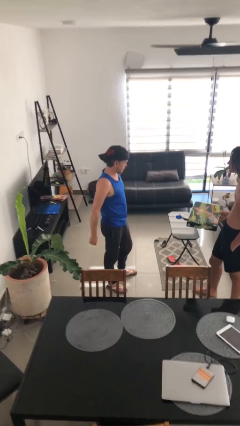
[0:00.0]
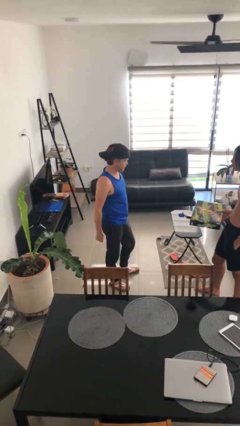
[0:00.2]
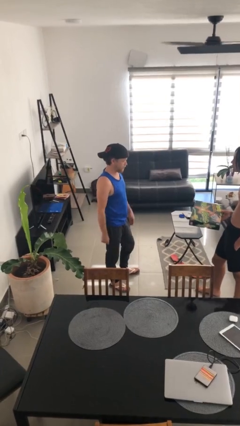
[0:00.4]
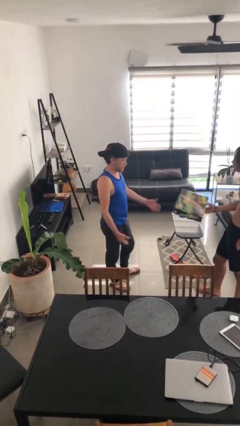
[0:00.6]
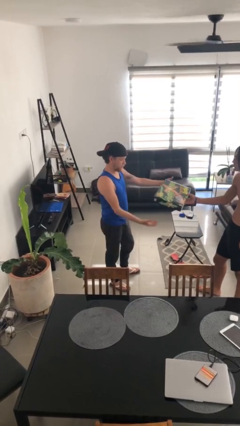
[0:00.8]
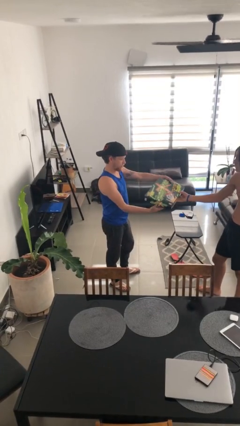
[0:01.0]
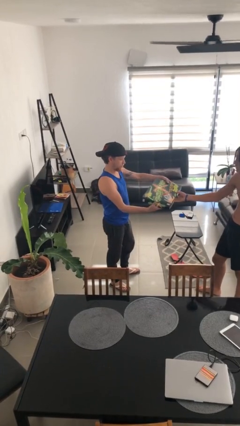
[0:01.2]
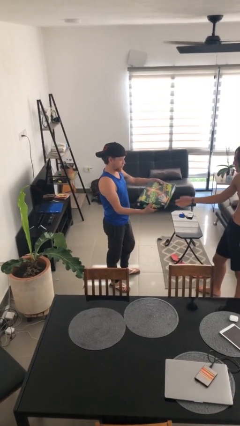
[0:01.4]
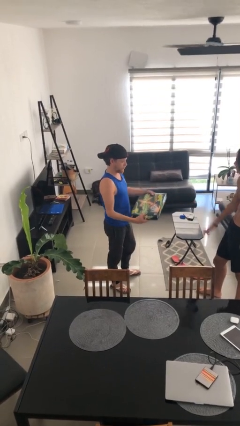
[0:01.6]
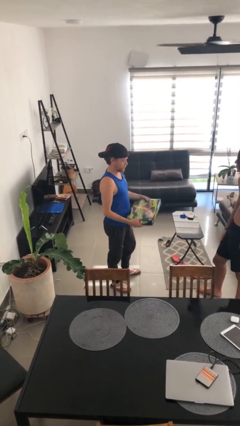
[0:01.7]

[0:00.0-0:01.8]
person transfers object to person

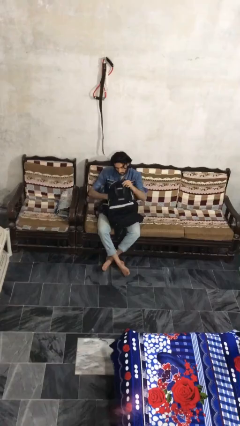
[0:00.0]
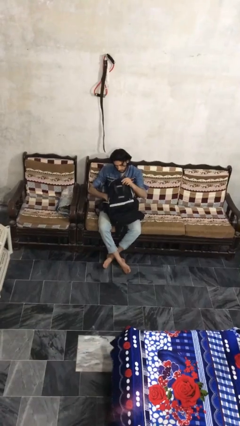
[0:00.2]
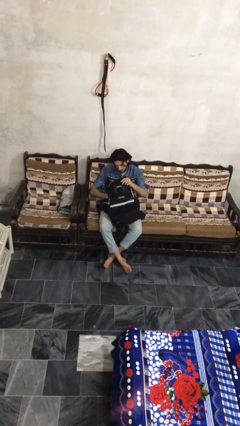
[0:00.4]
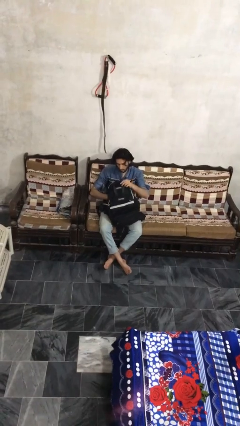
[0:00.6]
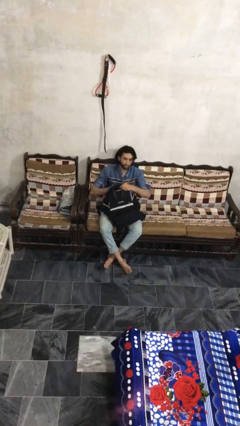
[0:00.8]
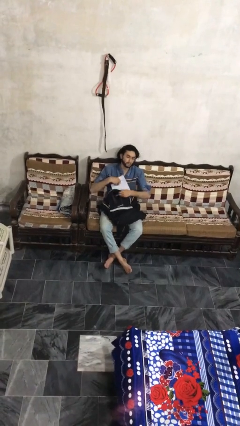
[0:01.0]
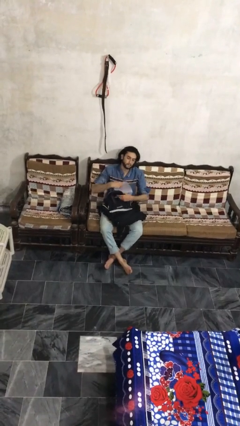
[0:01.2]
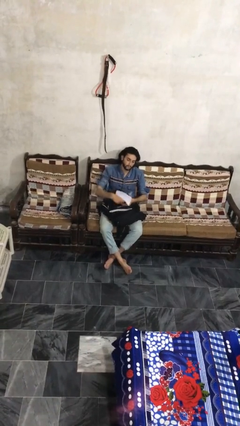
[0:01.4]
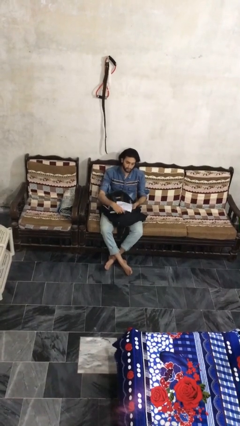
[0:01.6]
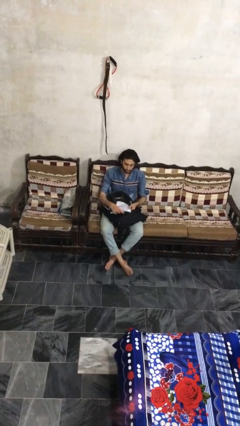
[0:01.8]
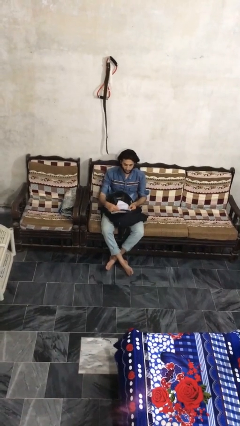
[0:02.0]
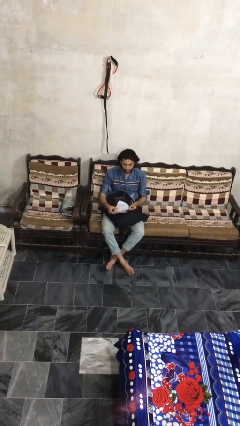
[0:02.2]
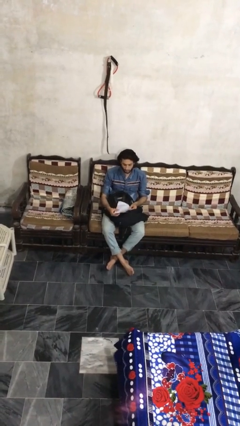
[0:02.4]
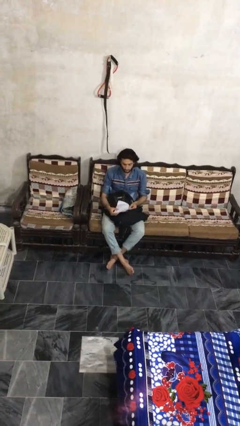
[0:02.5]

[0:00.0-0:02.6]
person takes object from backpack

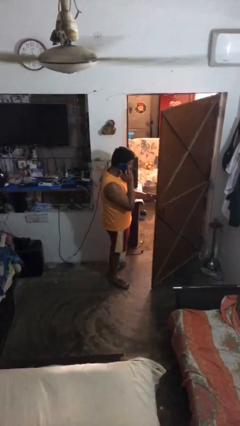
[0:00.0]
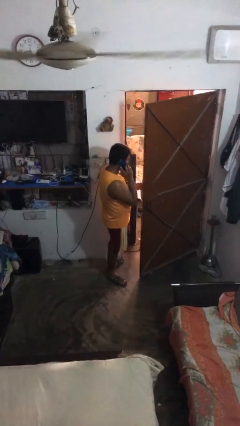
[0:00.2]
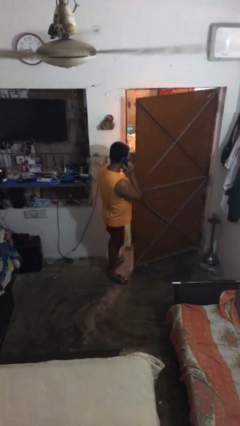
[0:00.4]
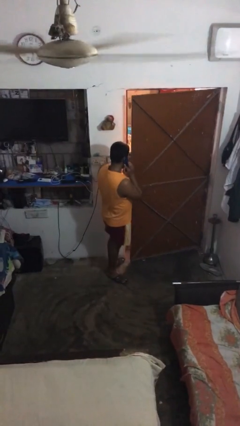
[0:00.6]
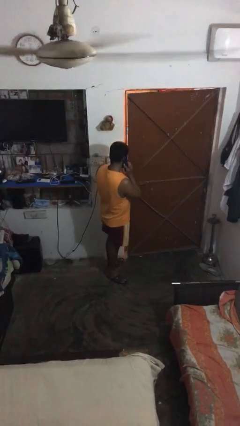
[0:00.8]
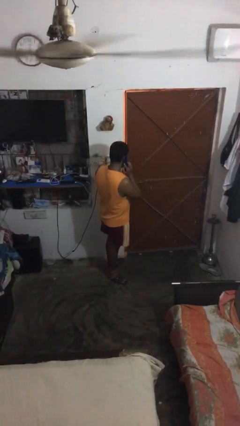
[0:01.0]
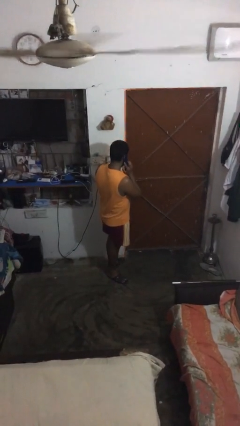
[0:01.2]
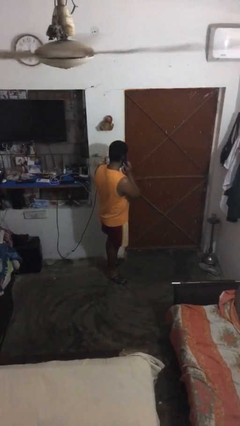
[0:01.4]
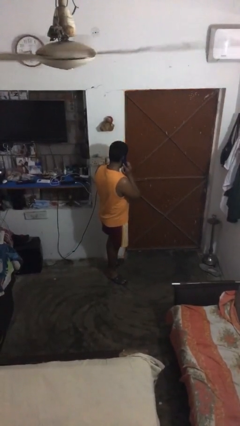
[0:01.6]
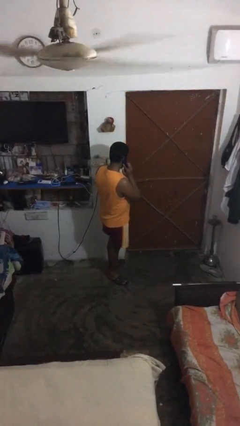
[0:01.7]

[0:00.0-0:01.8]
person closes facility door

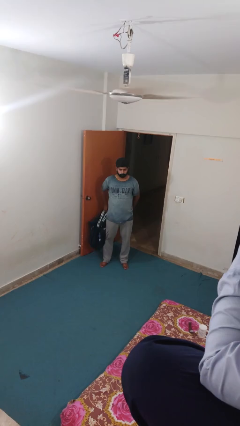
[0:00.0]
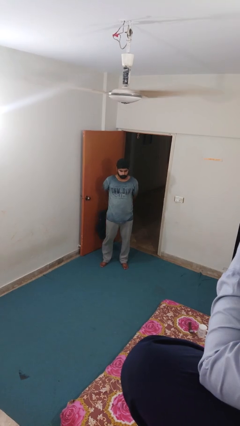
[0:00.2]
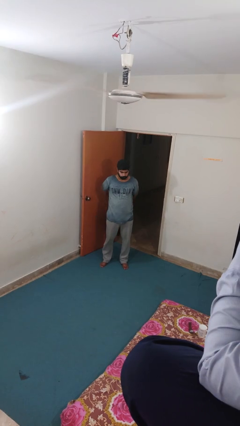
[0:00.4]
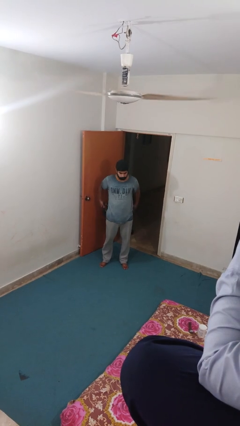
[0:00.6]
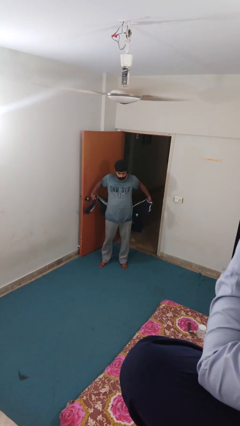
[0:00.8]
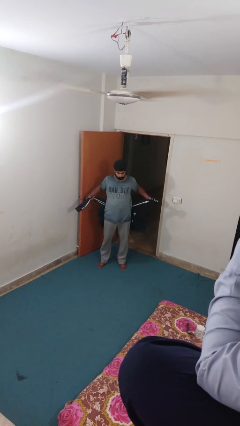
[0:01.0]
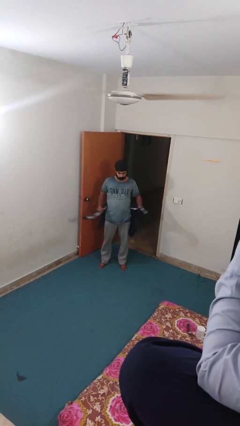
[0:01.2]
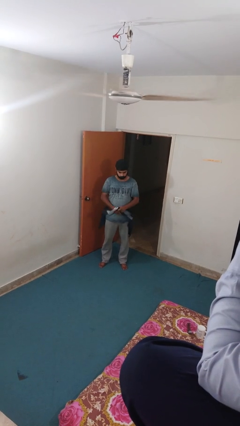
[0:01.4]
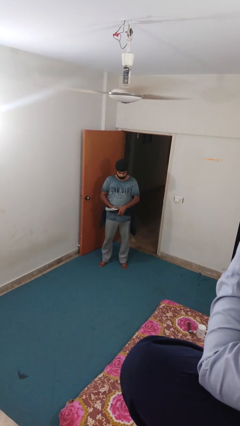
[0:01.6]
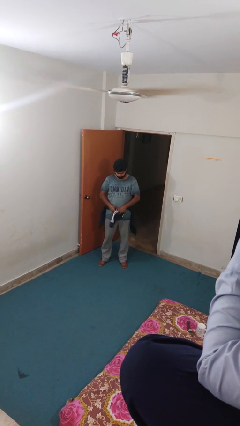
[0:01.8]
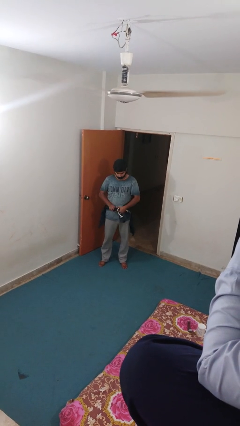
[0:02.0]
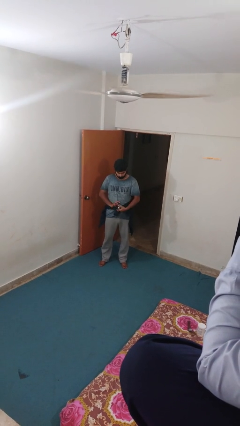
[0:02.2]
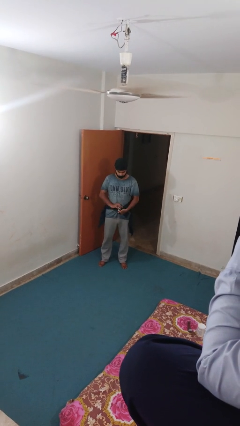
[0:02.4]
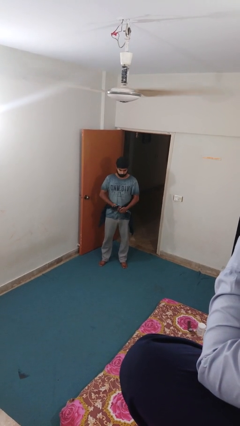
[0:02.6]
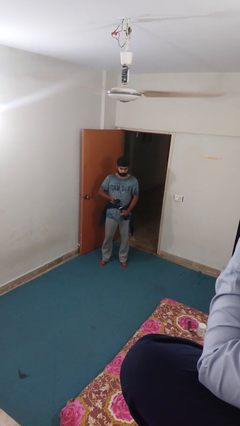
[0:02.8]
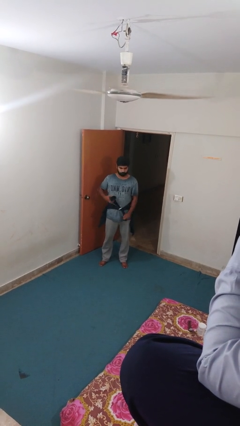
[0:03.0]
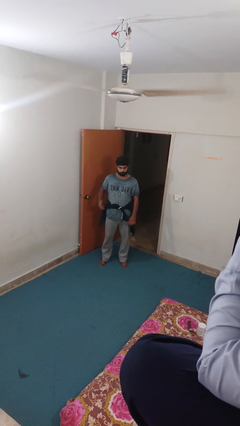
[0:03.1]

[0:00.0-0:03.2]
person ties jacket around waist

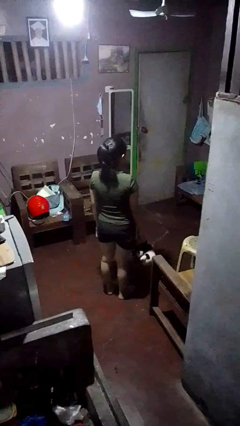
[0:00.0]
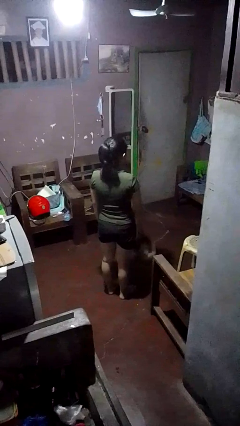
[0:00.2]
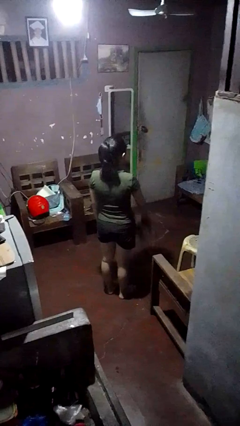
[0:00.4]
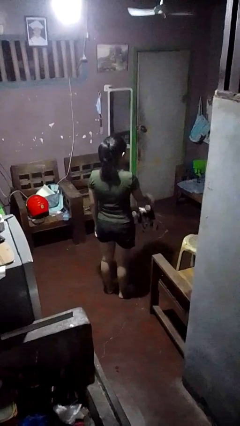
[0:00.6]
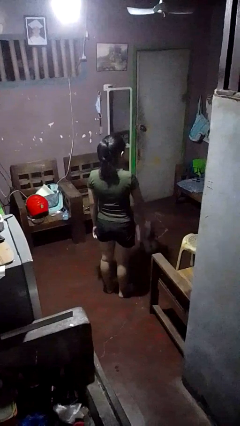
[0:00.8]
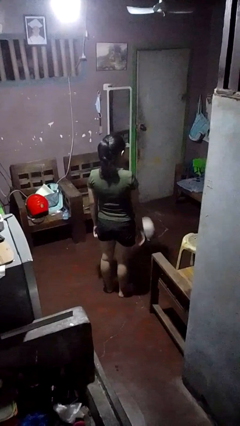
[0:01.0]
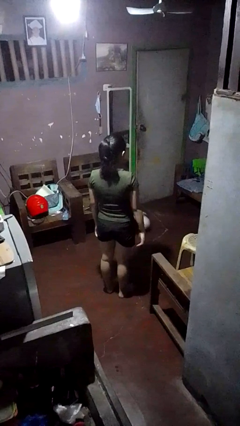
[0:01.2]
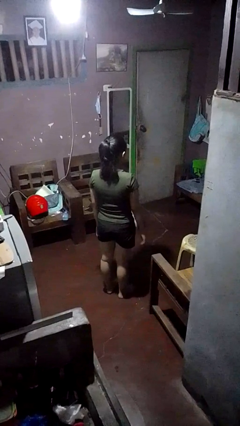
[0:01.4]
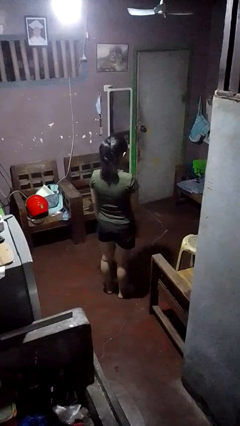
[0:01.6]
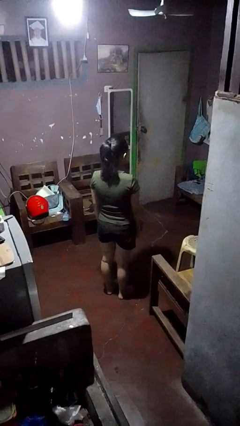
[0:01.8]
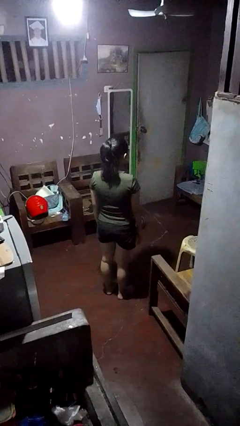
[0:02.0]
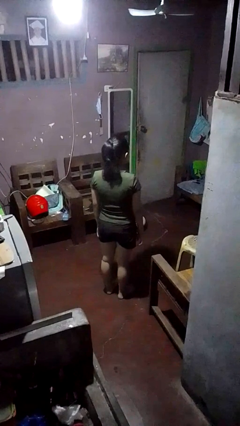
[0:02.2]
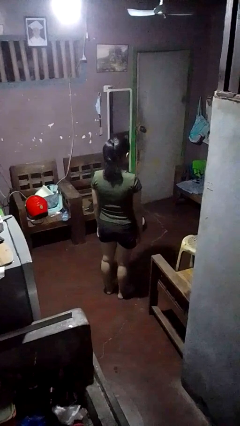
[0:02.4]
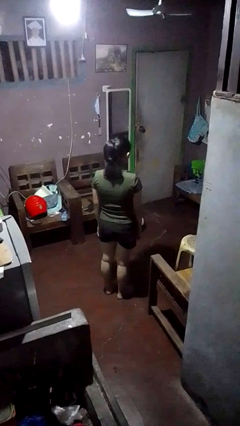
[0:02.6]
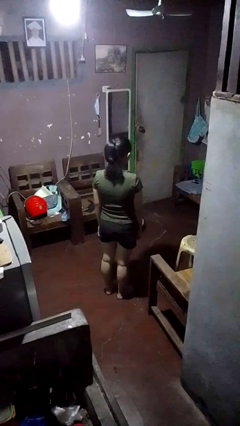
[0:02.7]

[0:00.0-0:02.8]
person throws object to ground

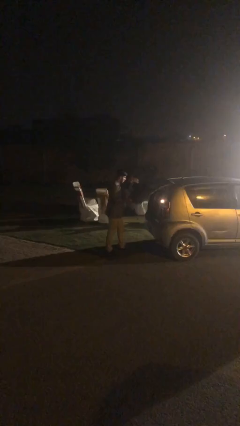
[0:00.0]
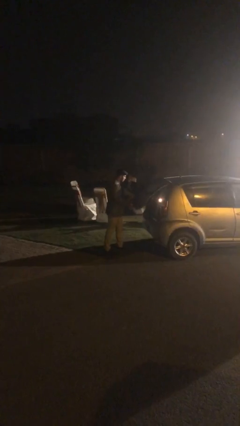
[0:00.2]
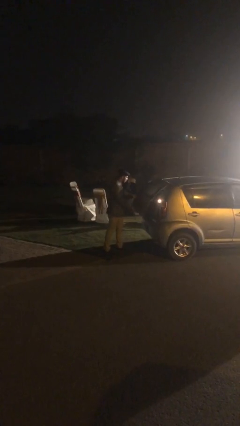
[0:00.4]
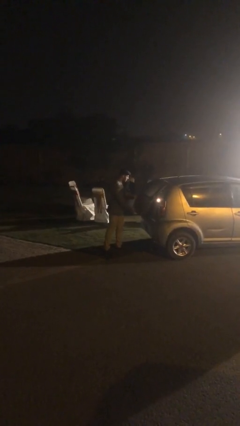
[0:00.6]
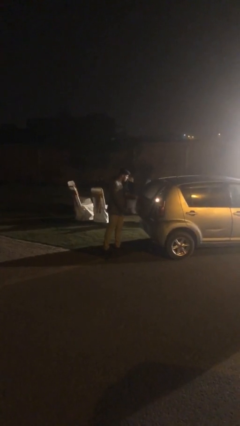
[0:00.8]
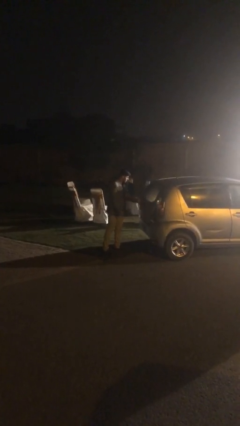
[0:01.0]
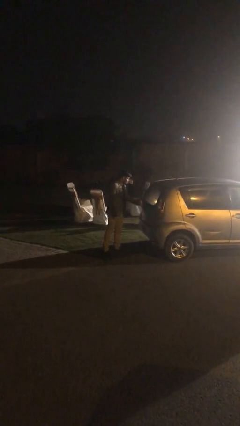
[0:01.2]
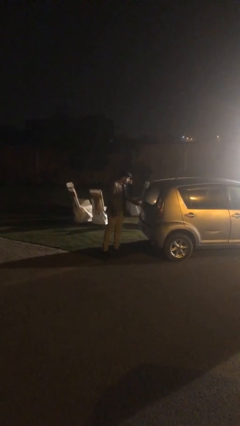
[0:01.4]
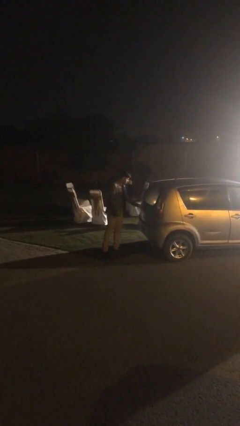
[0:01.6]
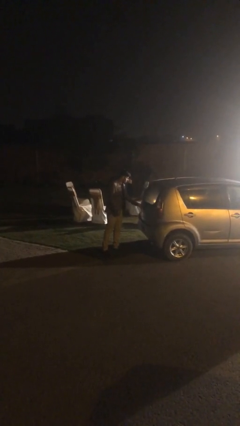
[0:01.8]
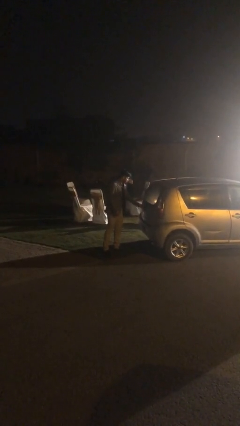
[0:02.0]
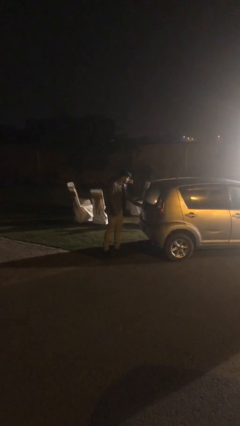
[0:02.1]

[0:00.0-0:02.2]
person closes car trunk

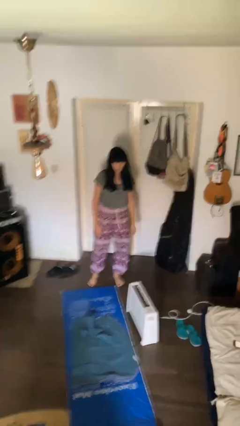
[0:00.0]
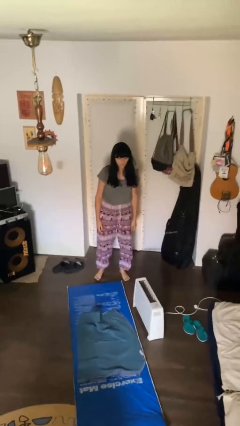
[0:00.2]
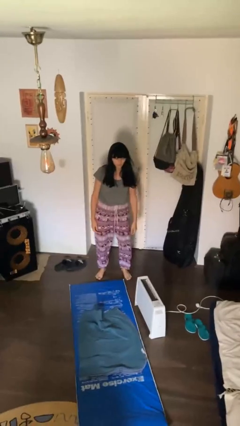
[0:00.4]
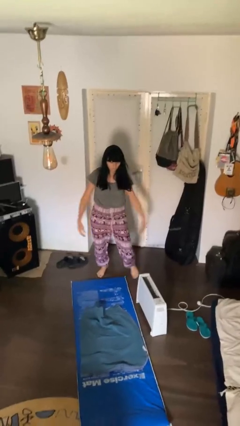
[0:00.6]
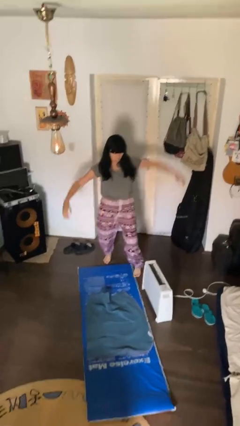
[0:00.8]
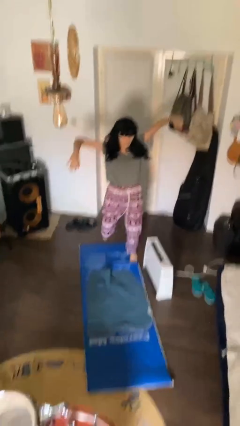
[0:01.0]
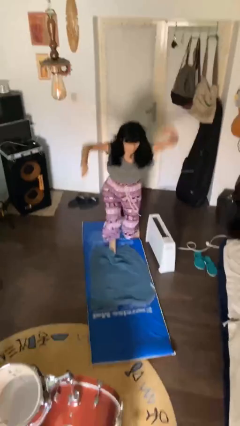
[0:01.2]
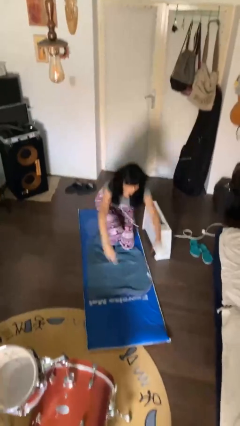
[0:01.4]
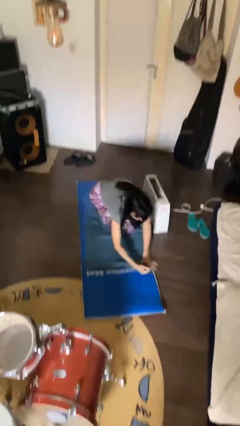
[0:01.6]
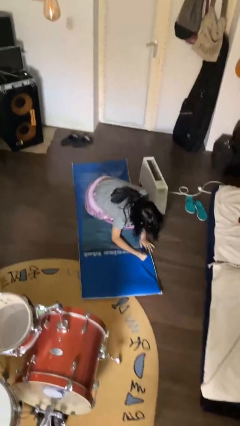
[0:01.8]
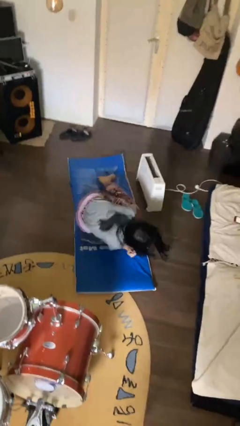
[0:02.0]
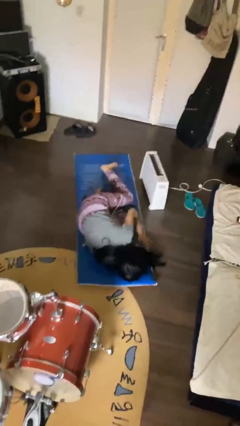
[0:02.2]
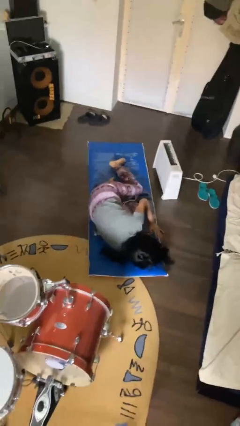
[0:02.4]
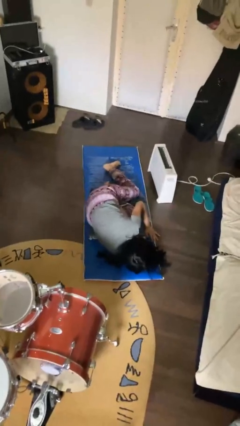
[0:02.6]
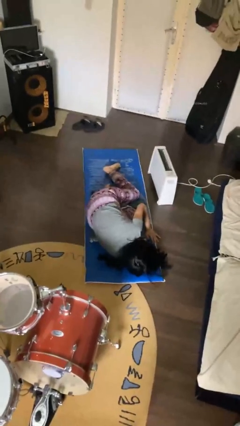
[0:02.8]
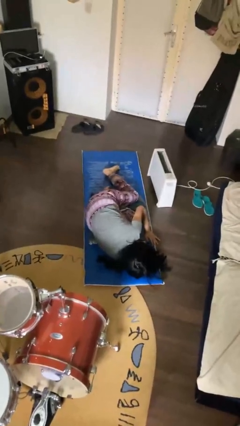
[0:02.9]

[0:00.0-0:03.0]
person trips on object on floor
